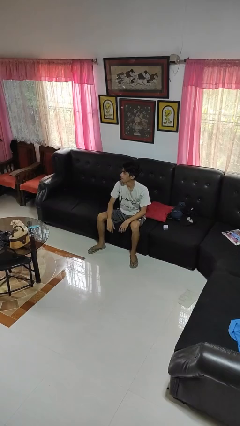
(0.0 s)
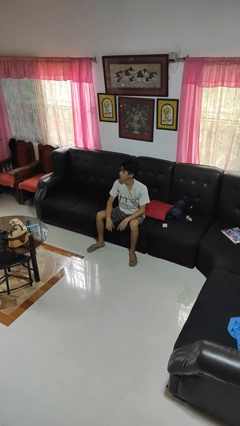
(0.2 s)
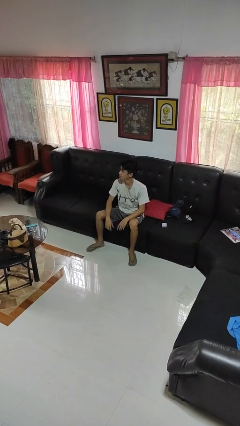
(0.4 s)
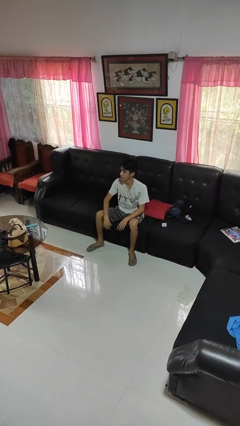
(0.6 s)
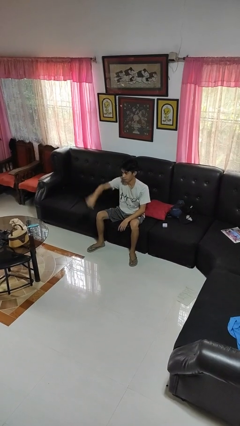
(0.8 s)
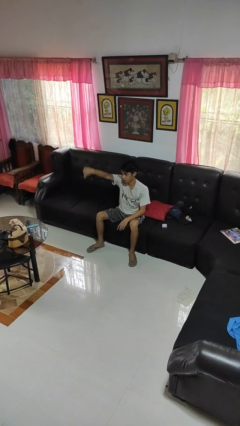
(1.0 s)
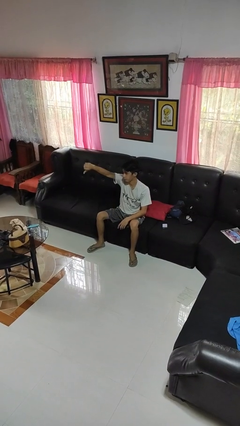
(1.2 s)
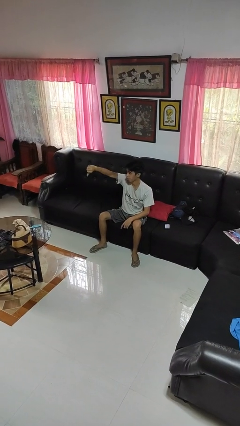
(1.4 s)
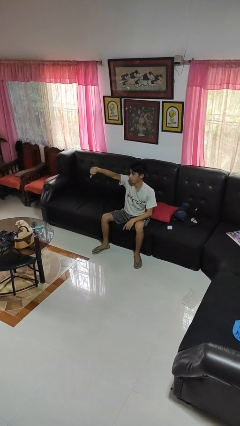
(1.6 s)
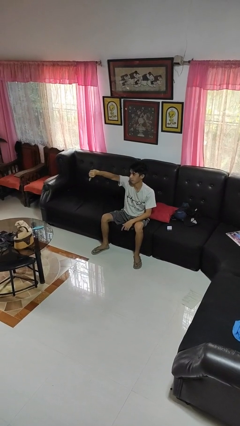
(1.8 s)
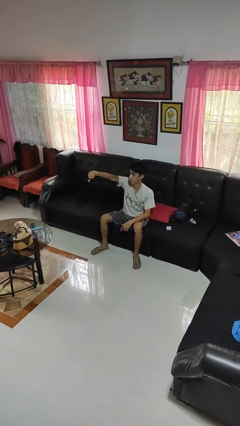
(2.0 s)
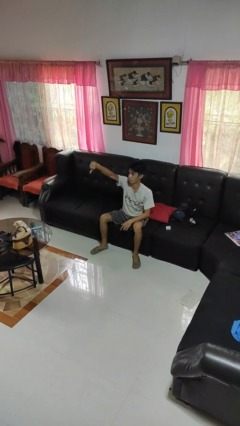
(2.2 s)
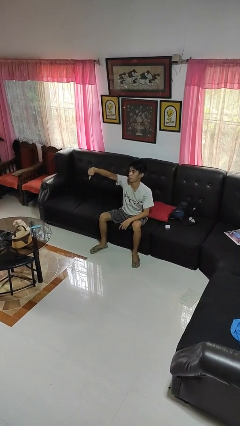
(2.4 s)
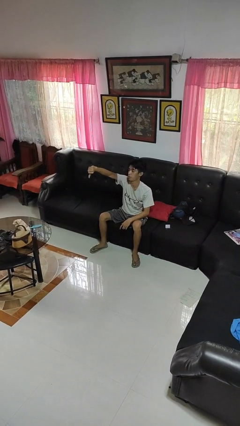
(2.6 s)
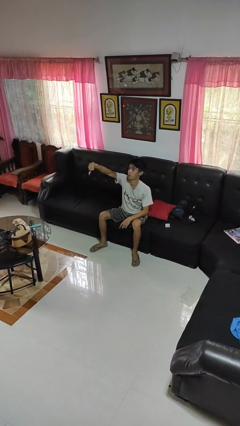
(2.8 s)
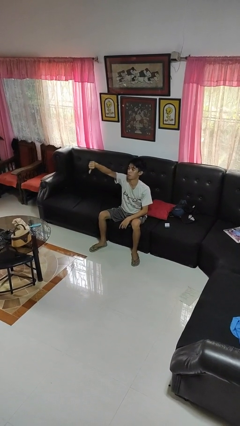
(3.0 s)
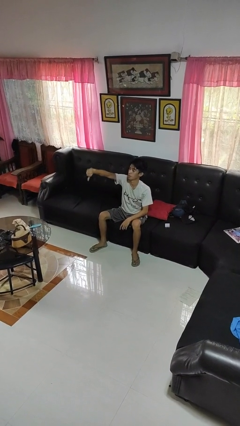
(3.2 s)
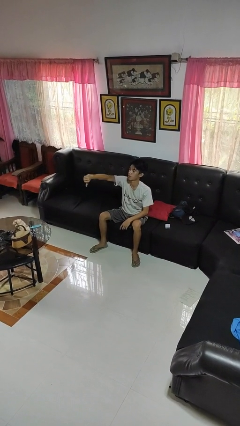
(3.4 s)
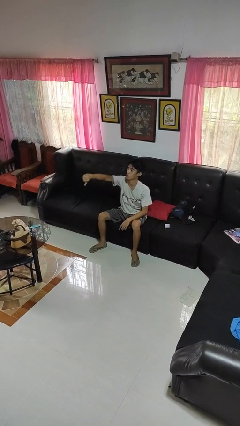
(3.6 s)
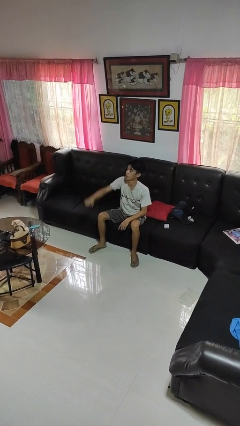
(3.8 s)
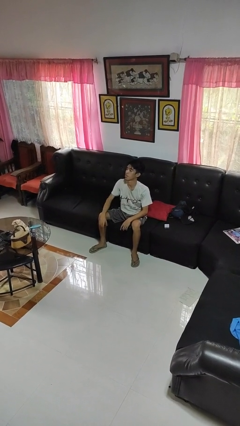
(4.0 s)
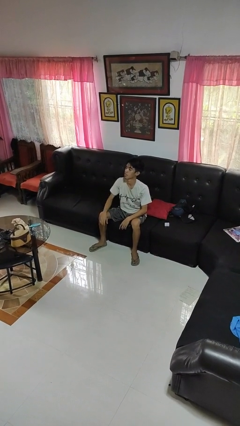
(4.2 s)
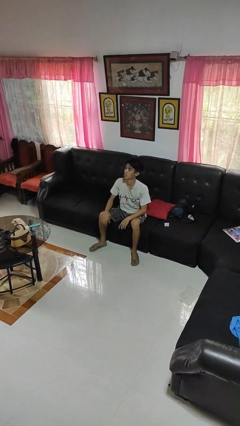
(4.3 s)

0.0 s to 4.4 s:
person gestures thumbs down

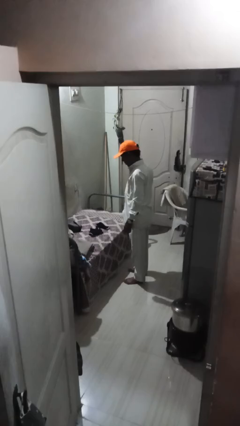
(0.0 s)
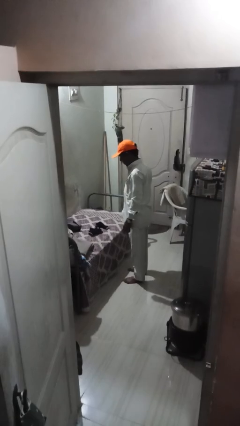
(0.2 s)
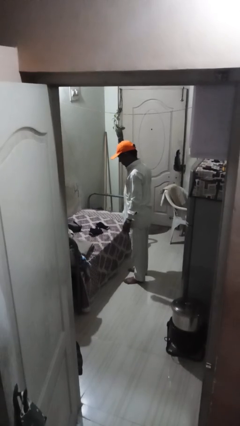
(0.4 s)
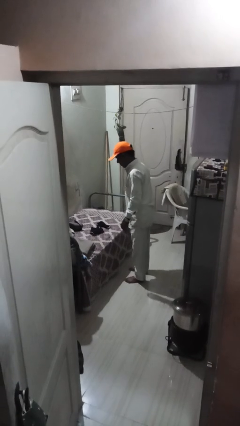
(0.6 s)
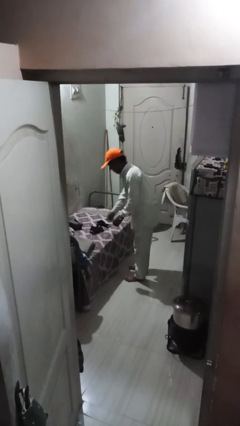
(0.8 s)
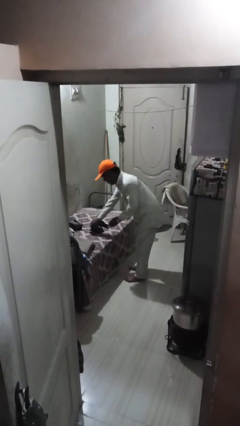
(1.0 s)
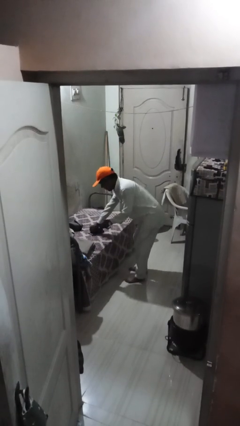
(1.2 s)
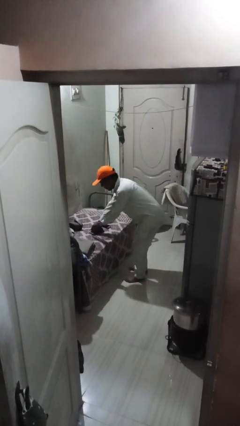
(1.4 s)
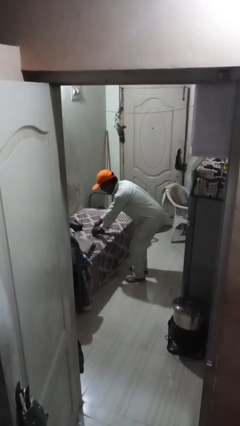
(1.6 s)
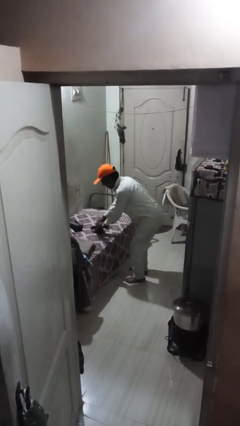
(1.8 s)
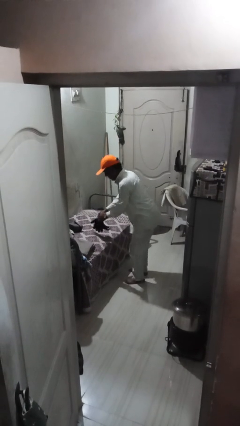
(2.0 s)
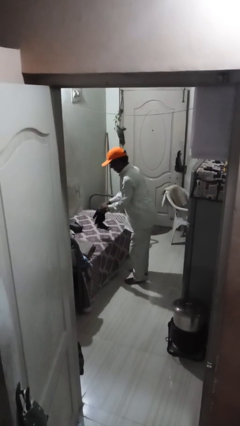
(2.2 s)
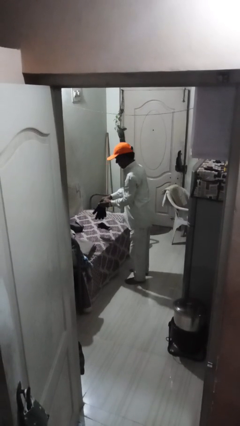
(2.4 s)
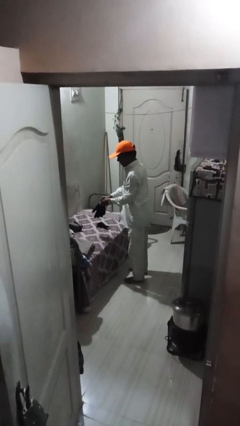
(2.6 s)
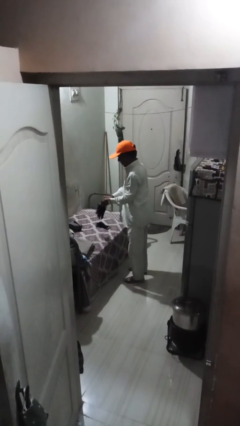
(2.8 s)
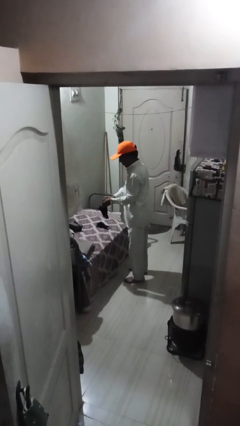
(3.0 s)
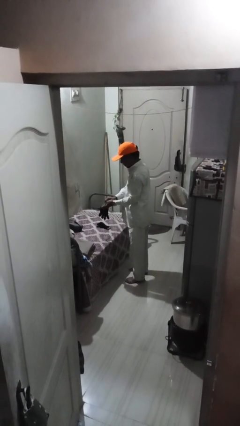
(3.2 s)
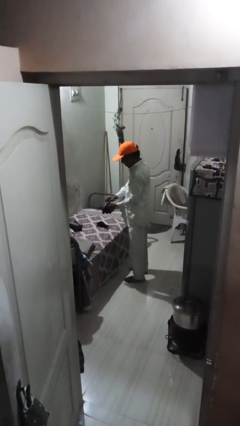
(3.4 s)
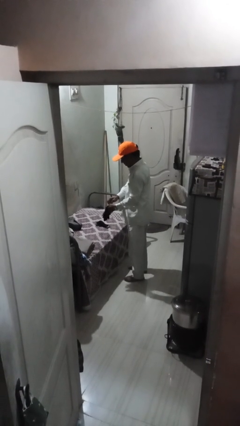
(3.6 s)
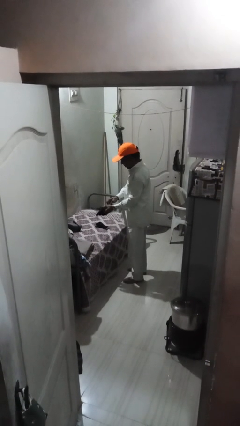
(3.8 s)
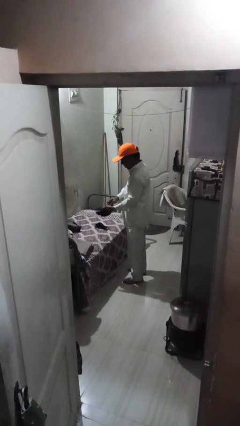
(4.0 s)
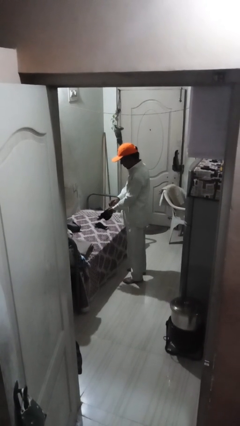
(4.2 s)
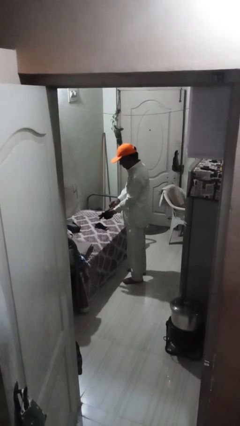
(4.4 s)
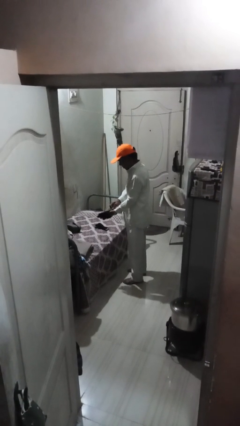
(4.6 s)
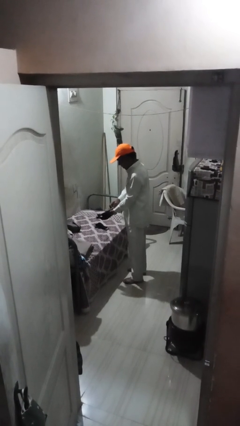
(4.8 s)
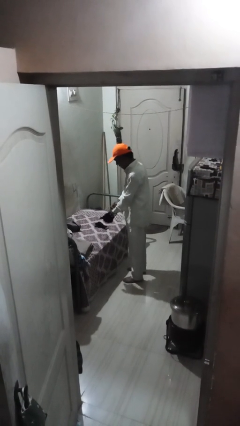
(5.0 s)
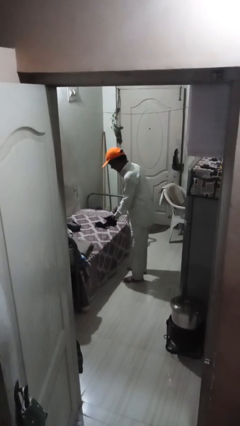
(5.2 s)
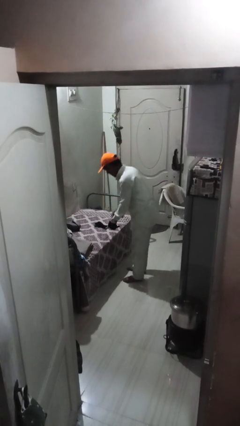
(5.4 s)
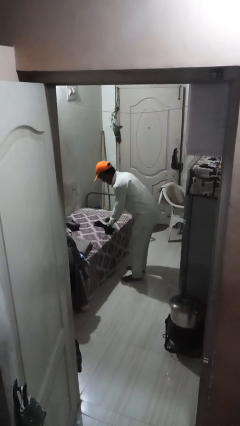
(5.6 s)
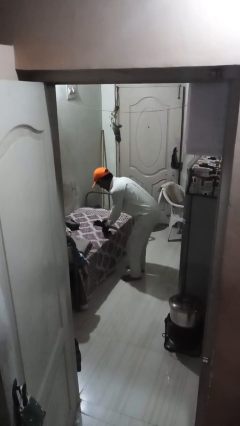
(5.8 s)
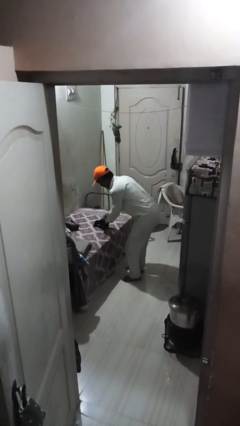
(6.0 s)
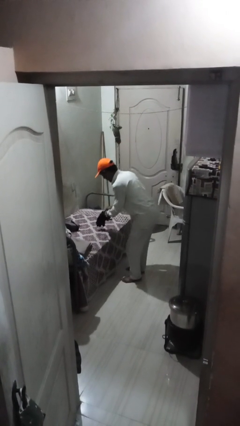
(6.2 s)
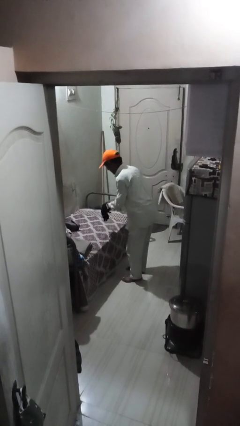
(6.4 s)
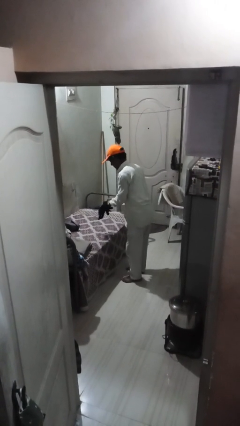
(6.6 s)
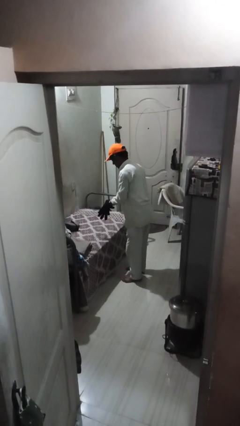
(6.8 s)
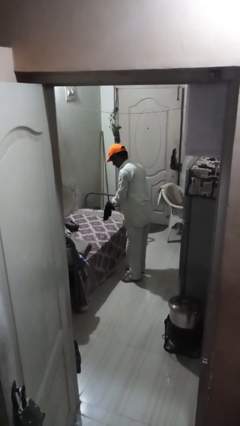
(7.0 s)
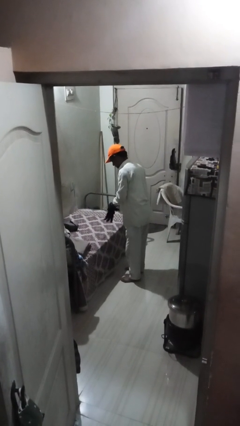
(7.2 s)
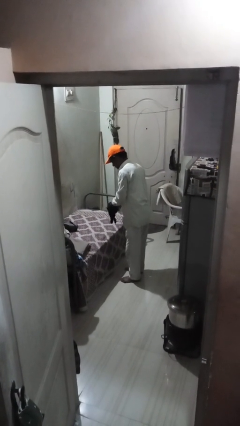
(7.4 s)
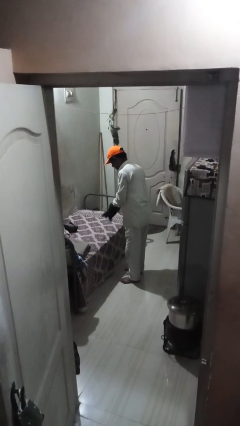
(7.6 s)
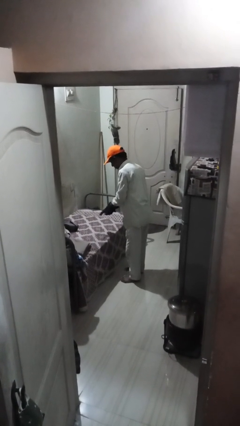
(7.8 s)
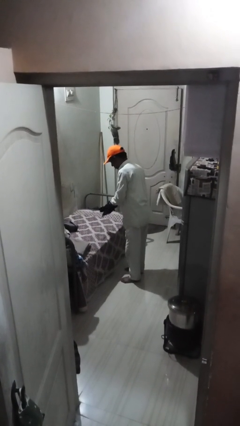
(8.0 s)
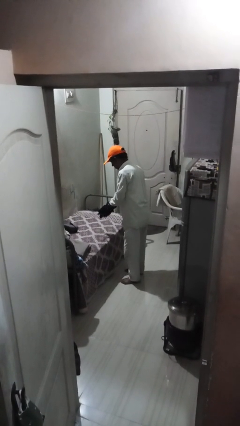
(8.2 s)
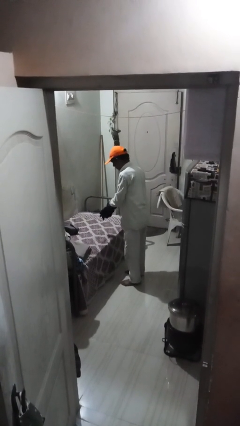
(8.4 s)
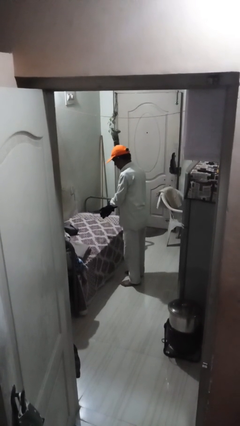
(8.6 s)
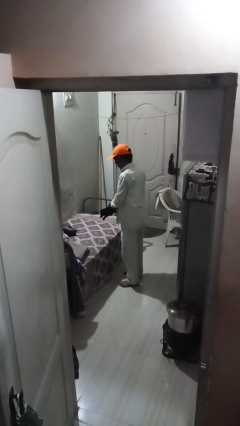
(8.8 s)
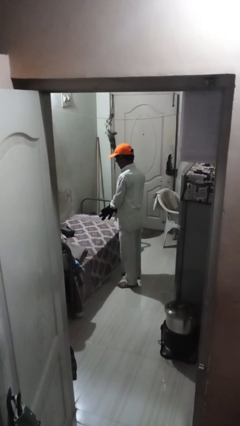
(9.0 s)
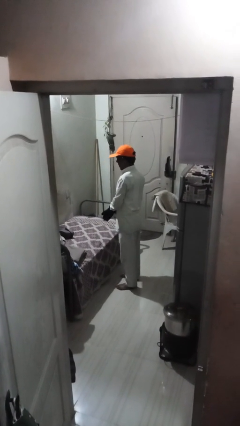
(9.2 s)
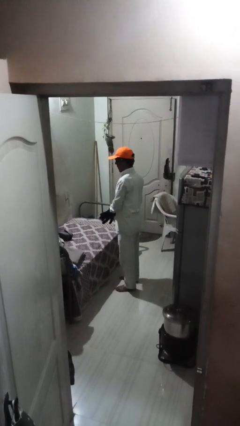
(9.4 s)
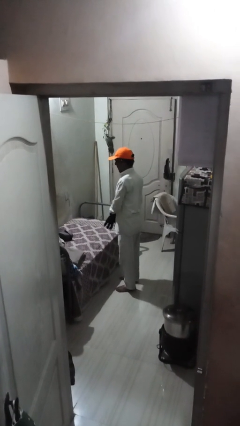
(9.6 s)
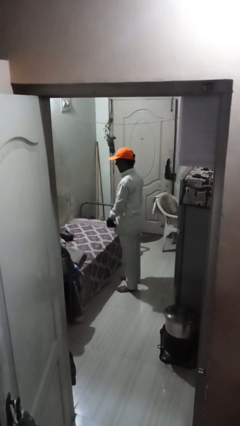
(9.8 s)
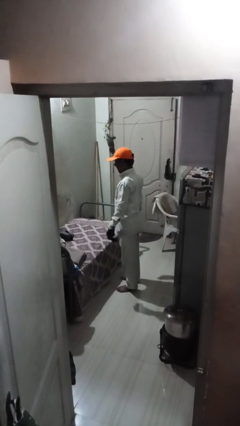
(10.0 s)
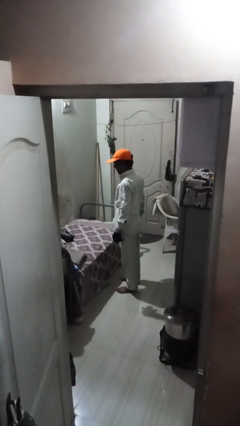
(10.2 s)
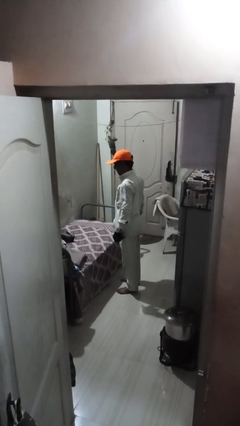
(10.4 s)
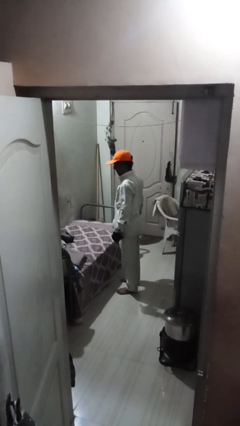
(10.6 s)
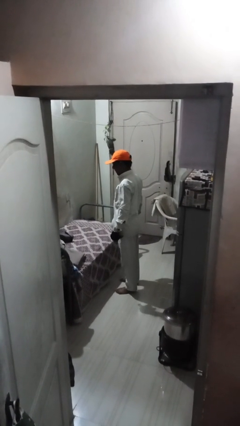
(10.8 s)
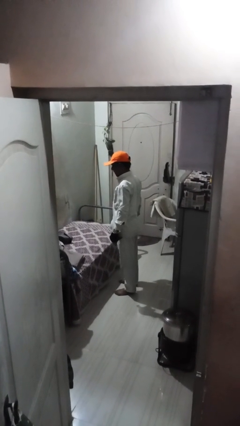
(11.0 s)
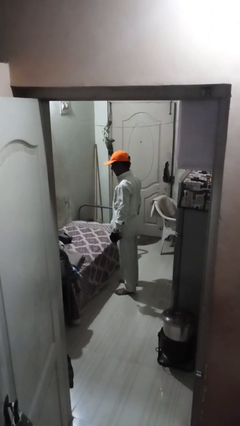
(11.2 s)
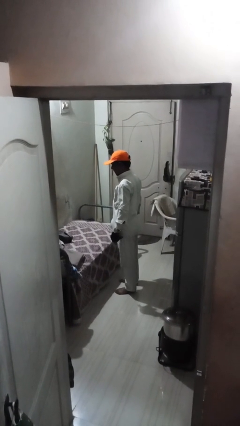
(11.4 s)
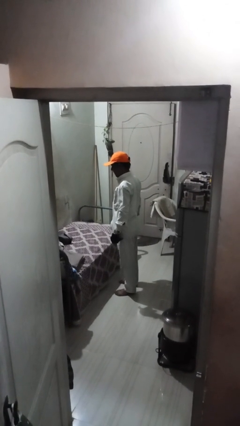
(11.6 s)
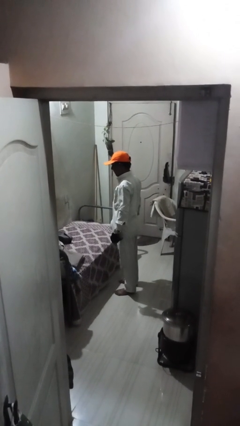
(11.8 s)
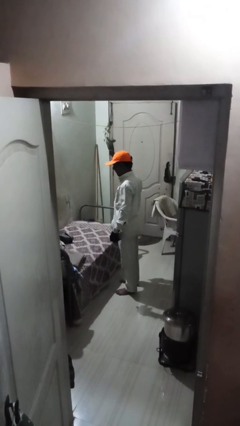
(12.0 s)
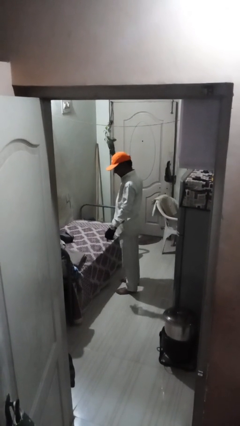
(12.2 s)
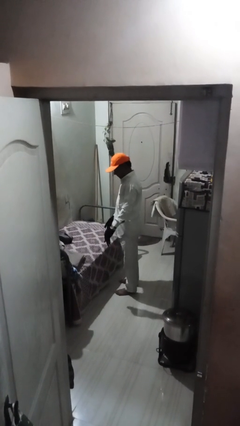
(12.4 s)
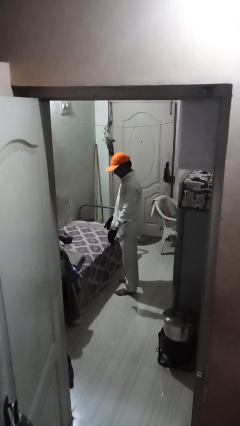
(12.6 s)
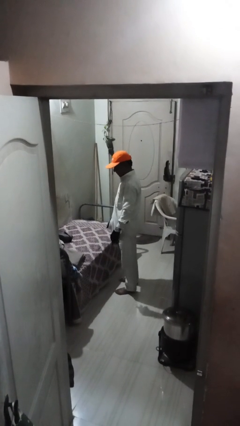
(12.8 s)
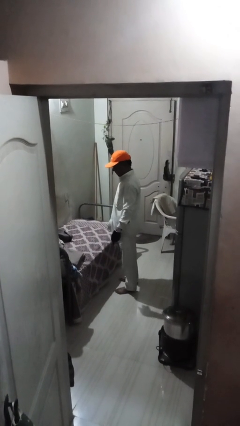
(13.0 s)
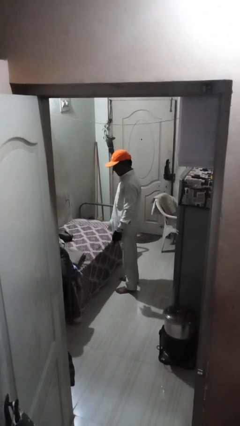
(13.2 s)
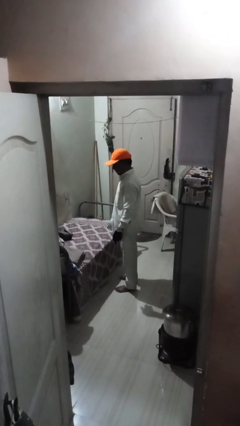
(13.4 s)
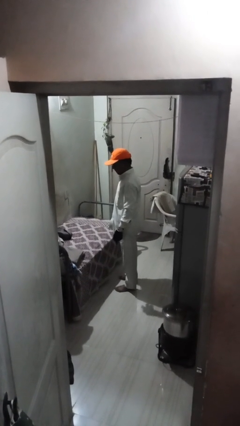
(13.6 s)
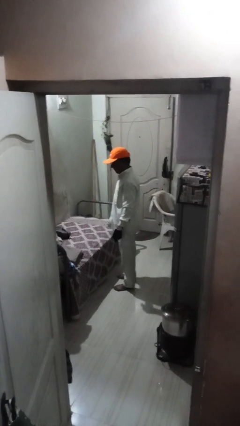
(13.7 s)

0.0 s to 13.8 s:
person puts on gloves
